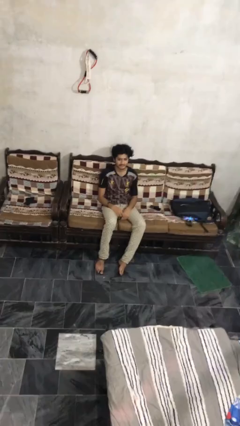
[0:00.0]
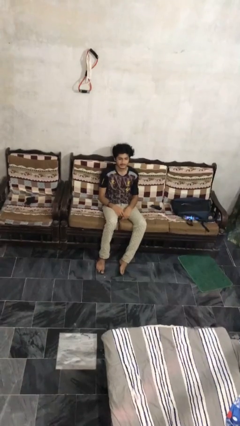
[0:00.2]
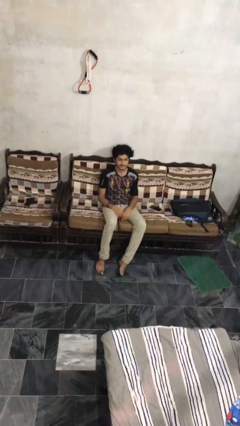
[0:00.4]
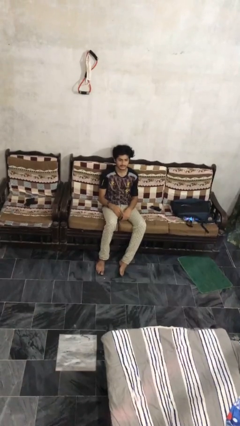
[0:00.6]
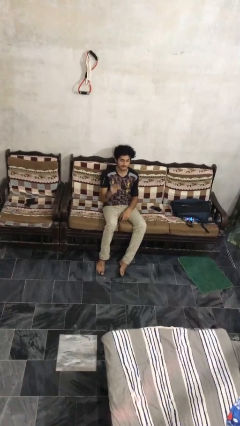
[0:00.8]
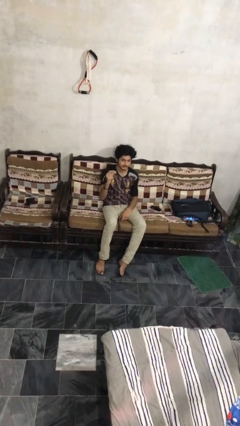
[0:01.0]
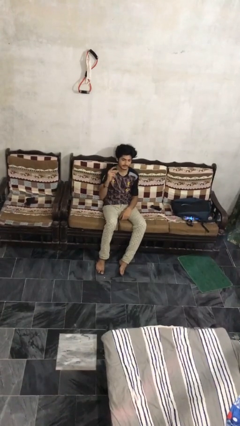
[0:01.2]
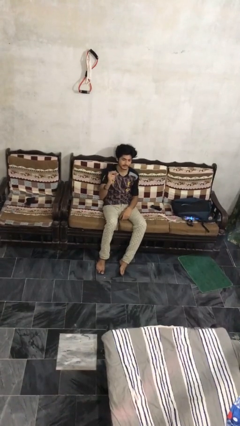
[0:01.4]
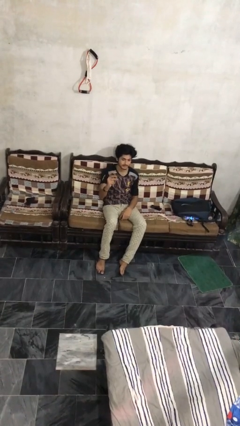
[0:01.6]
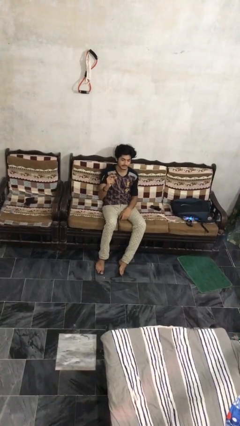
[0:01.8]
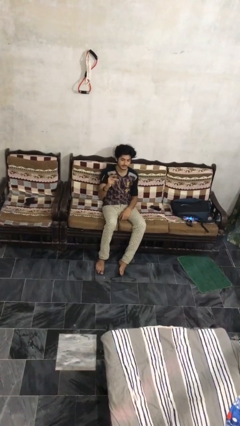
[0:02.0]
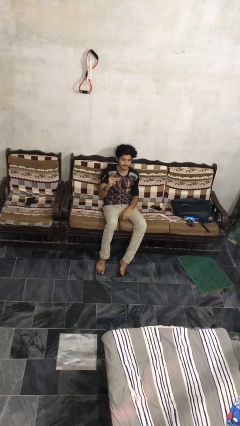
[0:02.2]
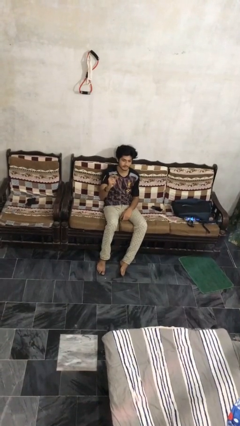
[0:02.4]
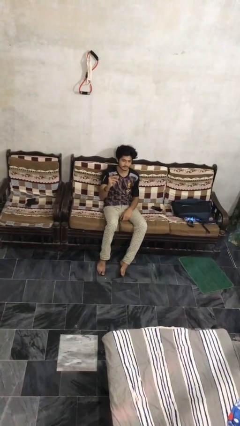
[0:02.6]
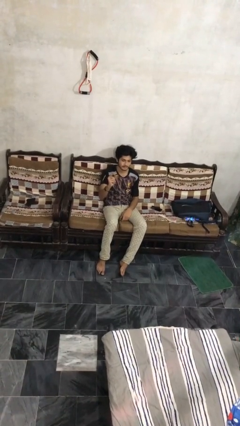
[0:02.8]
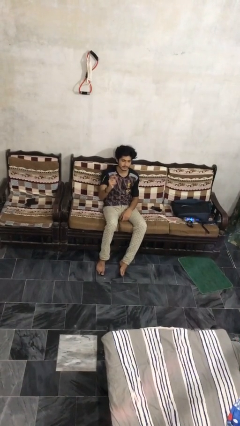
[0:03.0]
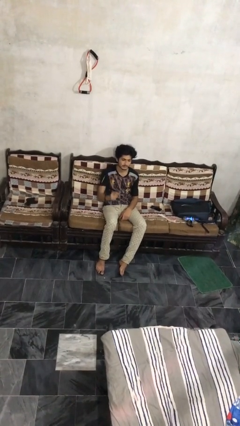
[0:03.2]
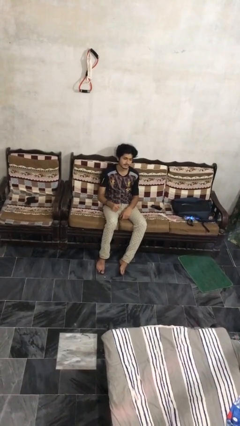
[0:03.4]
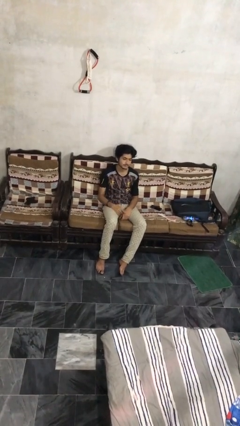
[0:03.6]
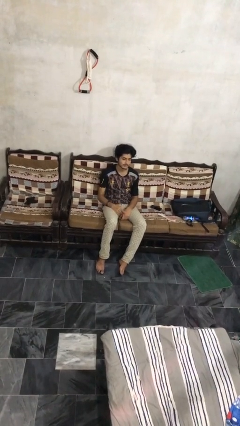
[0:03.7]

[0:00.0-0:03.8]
person snaps fingers

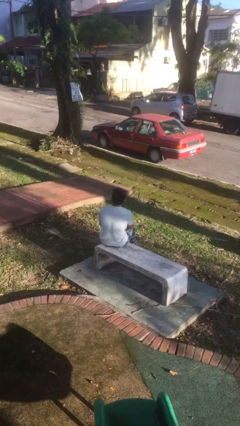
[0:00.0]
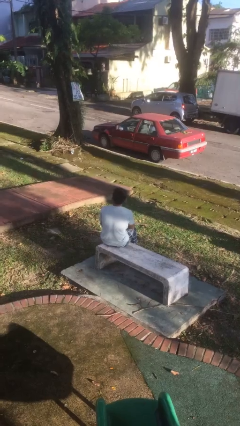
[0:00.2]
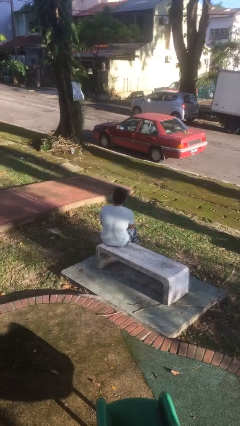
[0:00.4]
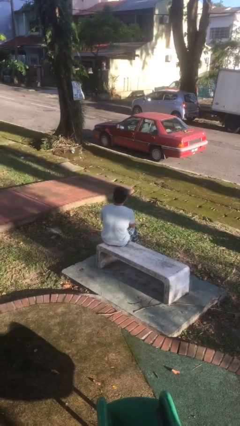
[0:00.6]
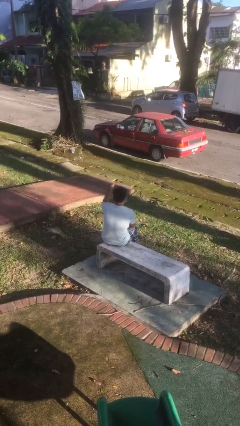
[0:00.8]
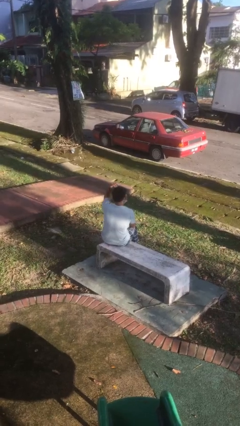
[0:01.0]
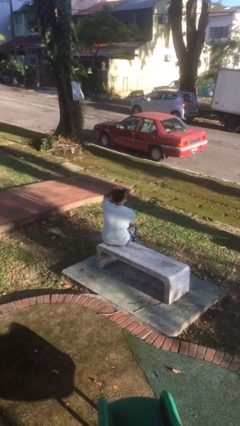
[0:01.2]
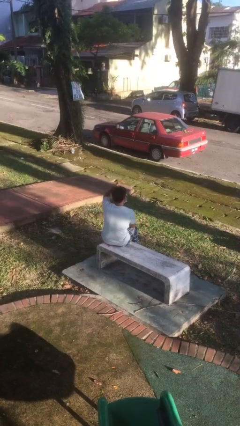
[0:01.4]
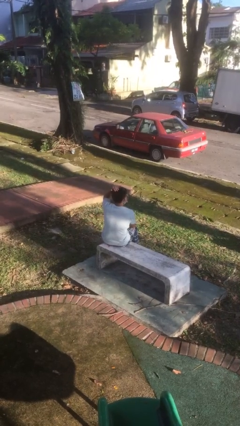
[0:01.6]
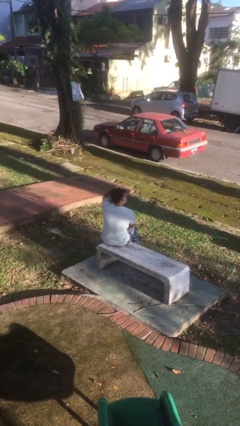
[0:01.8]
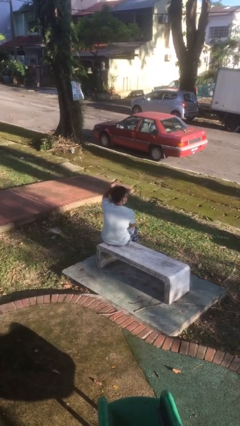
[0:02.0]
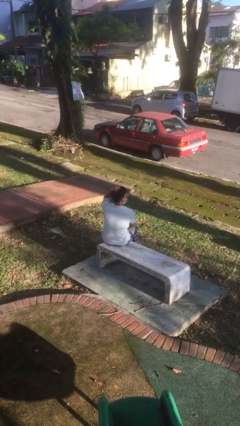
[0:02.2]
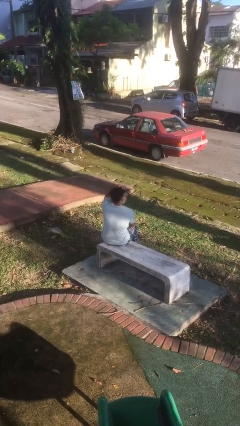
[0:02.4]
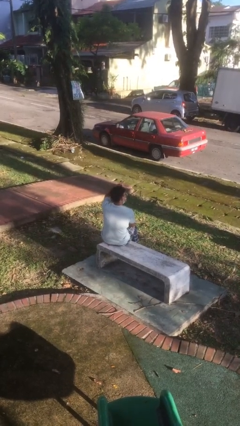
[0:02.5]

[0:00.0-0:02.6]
person pats head

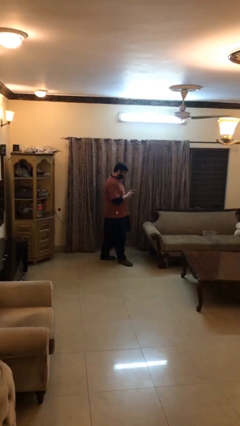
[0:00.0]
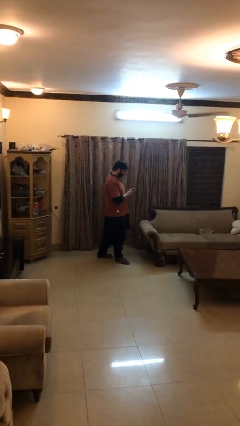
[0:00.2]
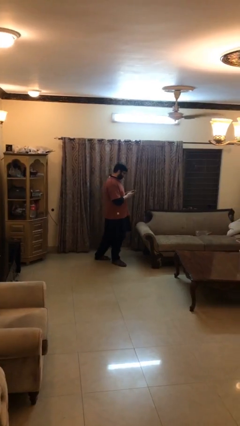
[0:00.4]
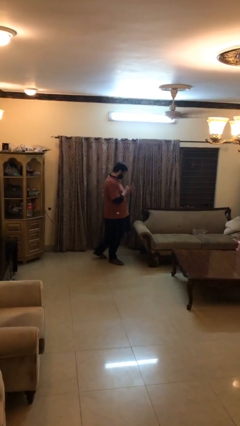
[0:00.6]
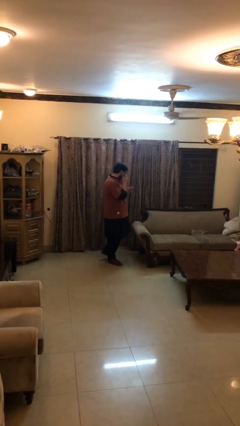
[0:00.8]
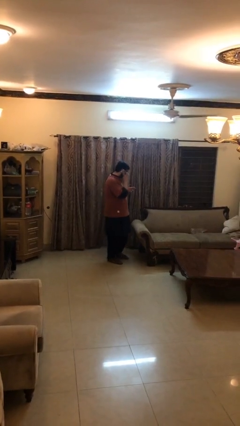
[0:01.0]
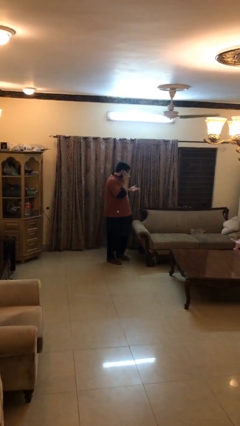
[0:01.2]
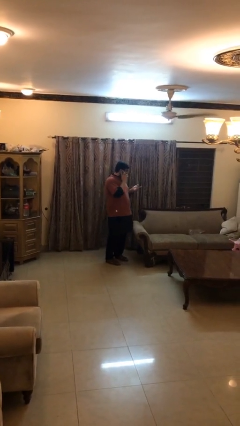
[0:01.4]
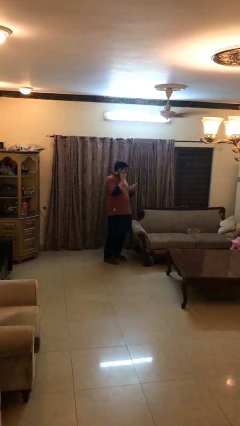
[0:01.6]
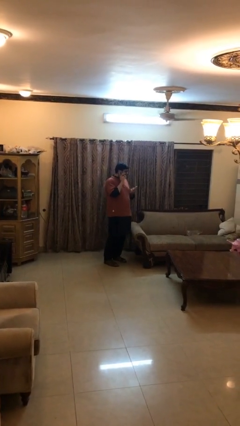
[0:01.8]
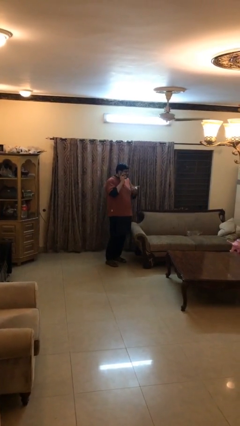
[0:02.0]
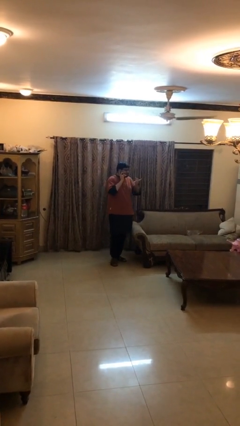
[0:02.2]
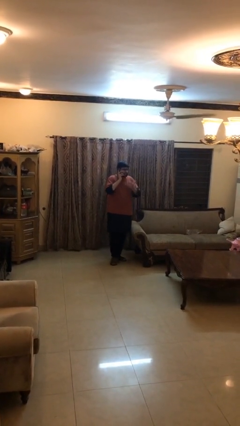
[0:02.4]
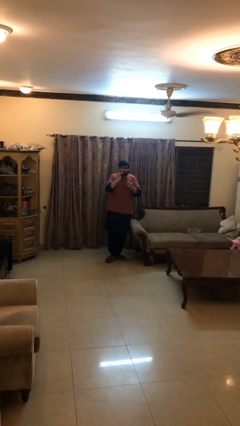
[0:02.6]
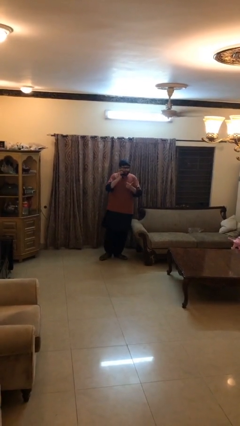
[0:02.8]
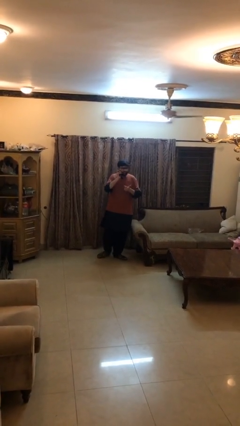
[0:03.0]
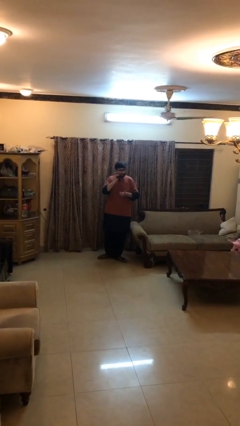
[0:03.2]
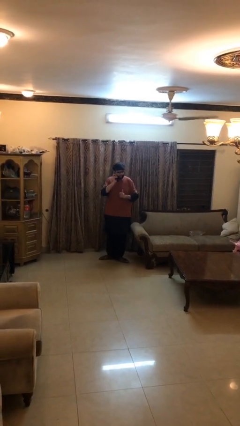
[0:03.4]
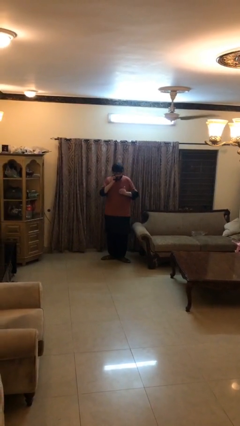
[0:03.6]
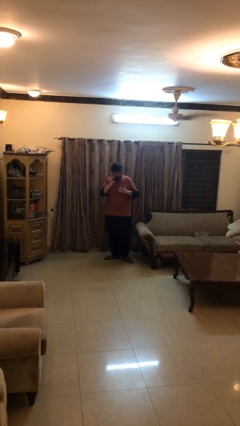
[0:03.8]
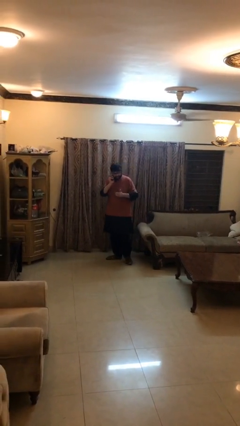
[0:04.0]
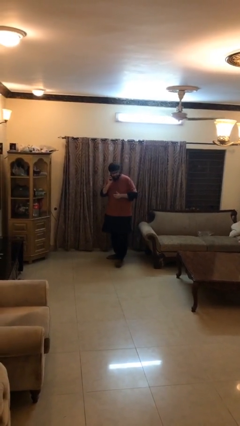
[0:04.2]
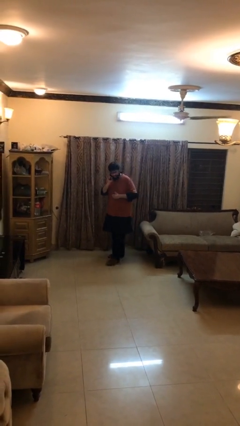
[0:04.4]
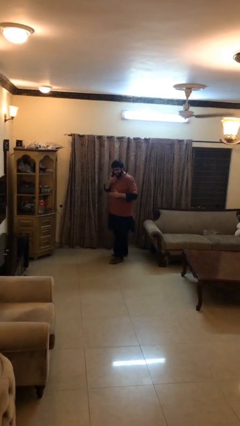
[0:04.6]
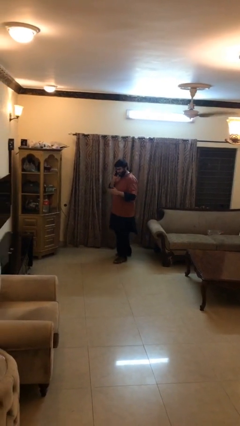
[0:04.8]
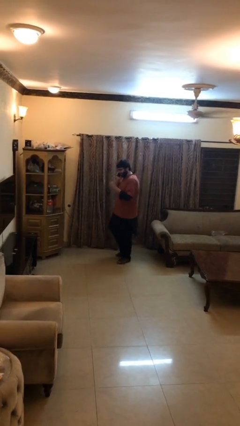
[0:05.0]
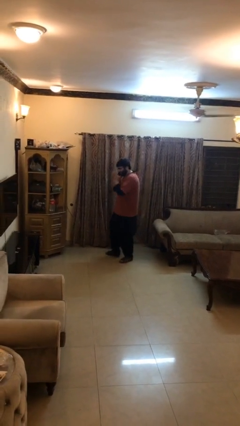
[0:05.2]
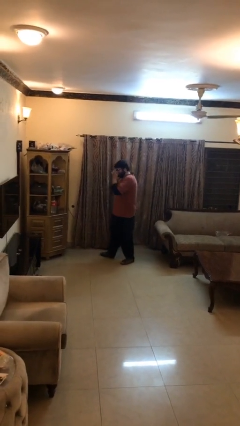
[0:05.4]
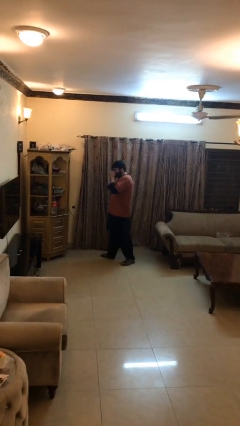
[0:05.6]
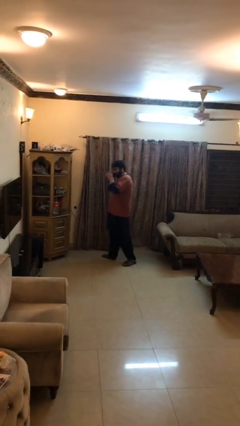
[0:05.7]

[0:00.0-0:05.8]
person talks on phone

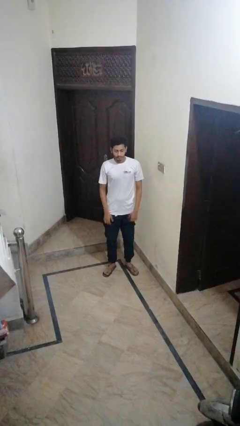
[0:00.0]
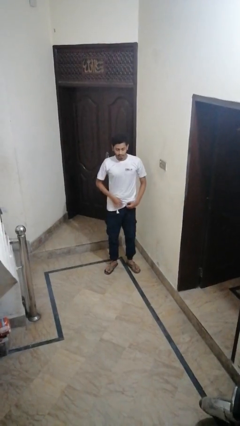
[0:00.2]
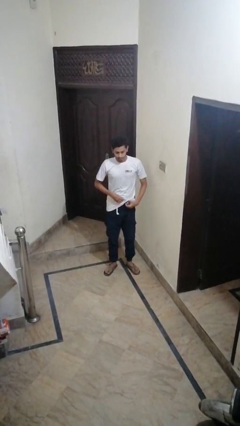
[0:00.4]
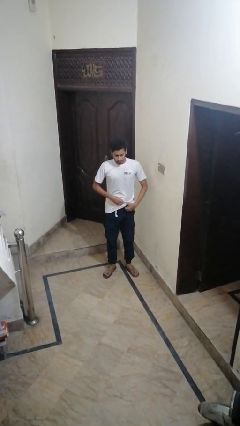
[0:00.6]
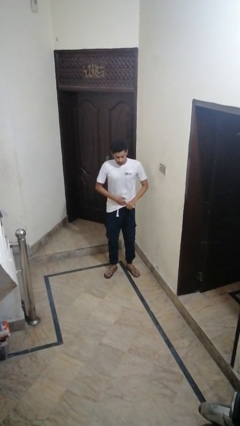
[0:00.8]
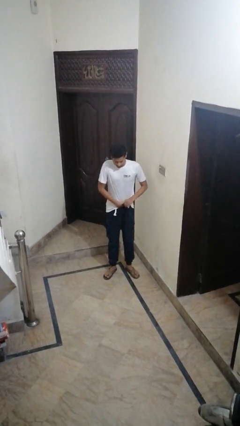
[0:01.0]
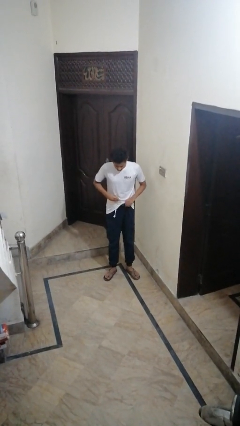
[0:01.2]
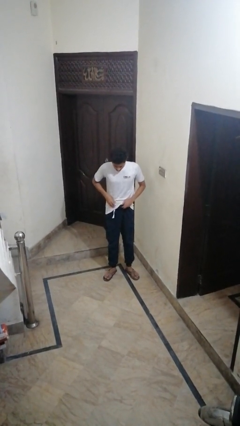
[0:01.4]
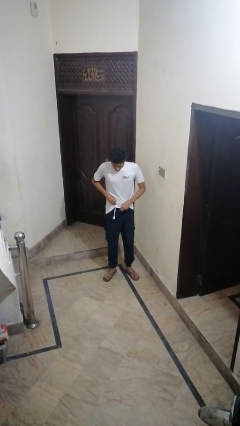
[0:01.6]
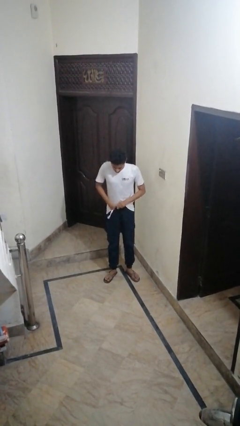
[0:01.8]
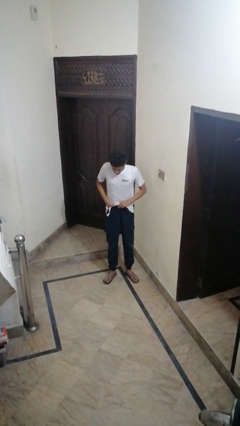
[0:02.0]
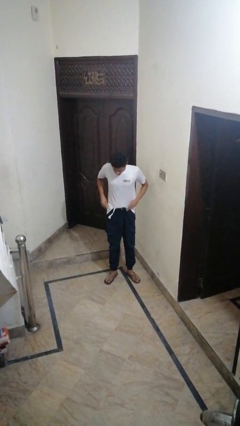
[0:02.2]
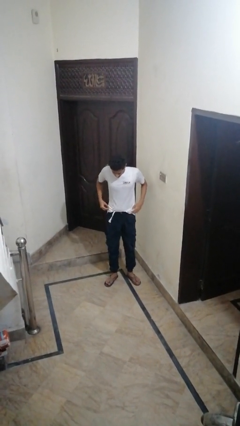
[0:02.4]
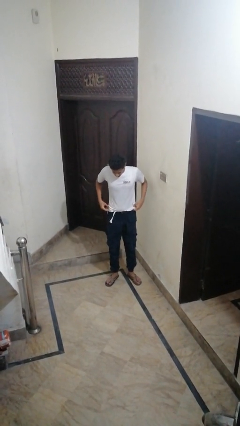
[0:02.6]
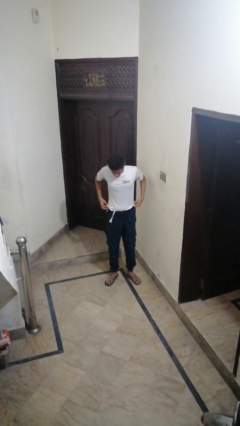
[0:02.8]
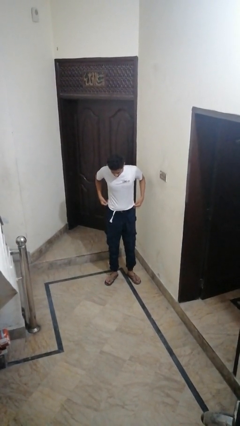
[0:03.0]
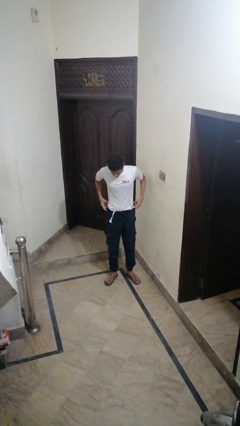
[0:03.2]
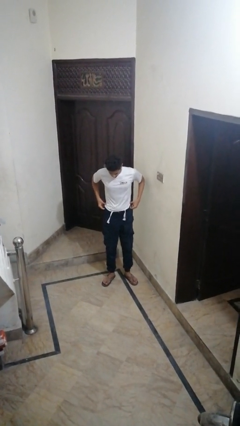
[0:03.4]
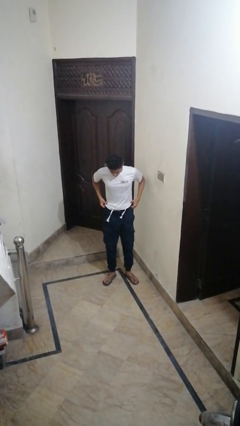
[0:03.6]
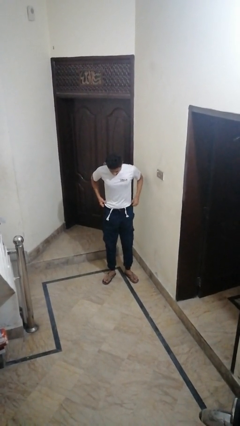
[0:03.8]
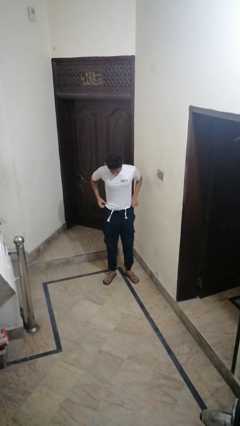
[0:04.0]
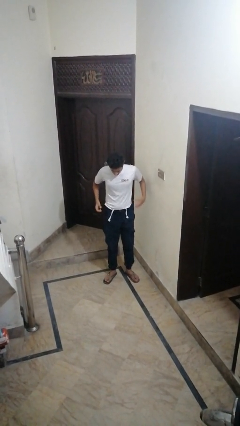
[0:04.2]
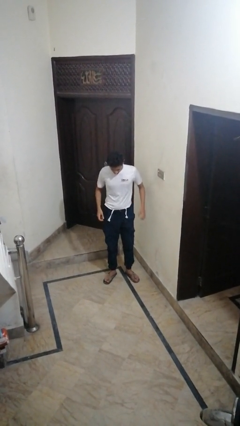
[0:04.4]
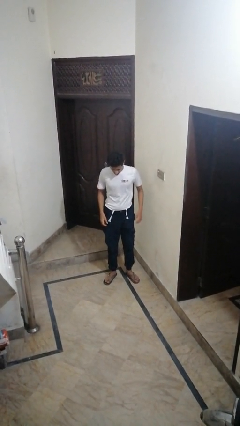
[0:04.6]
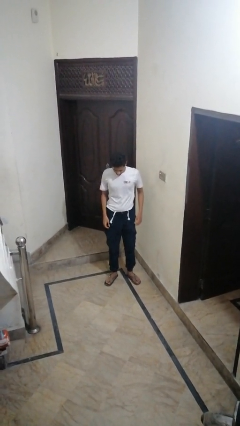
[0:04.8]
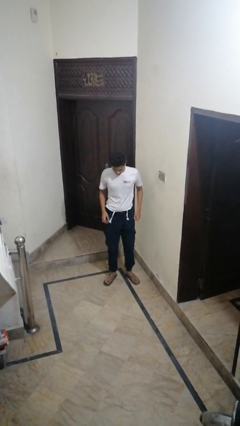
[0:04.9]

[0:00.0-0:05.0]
person tucks in shirt

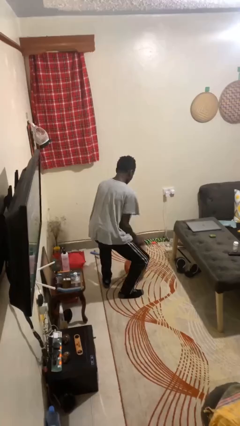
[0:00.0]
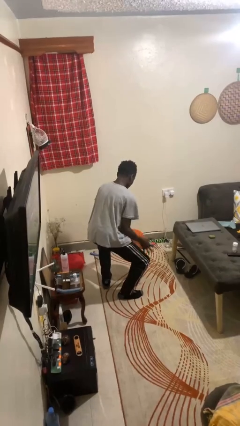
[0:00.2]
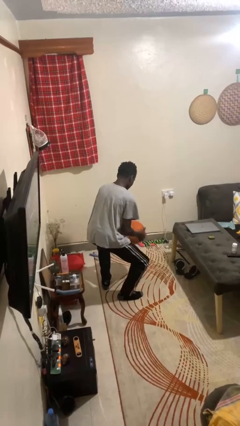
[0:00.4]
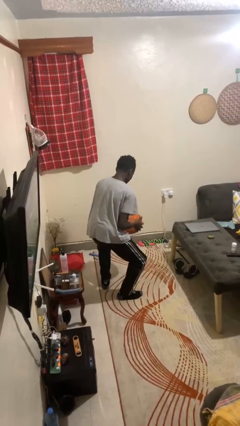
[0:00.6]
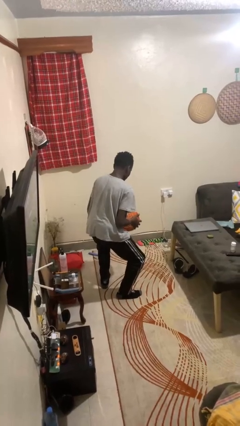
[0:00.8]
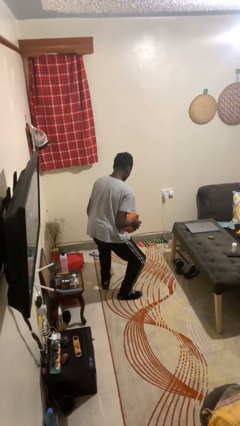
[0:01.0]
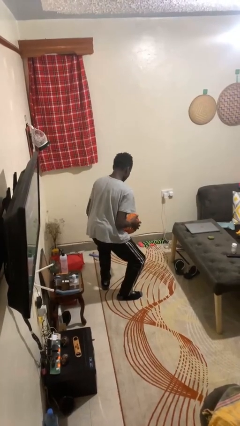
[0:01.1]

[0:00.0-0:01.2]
person bounces ball on floor
